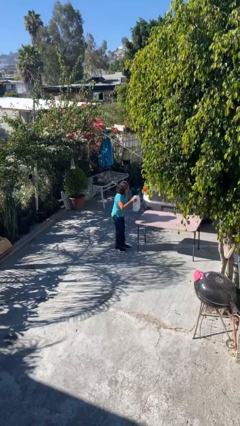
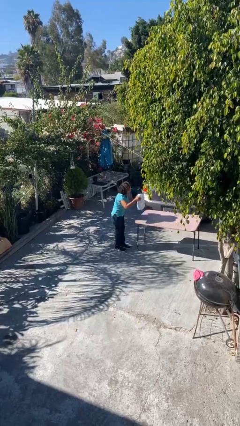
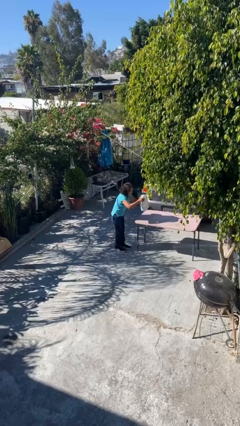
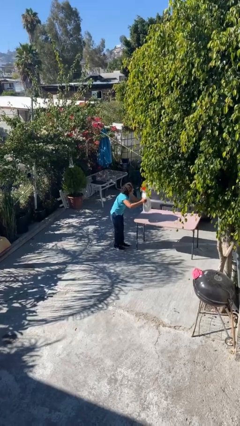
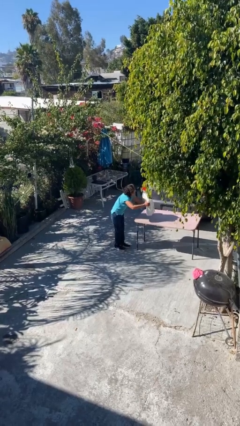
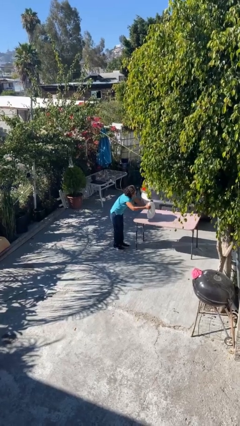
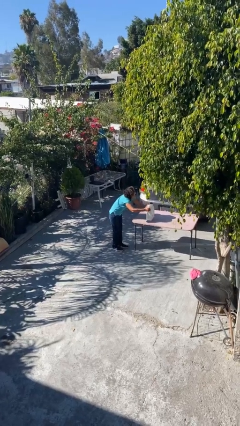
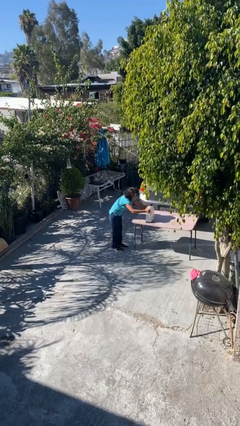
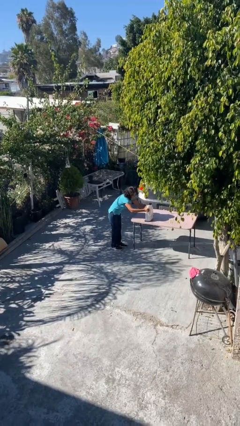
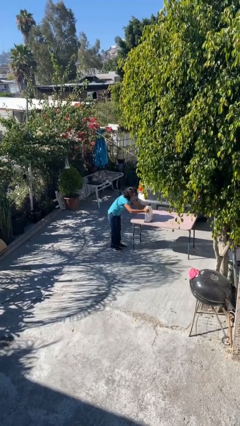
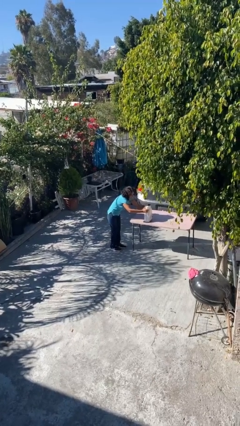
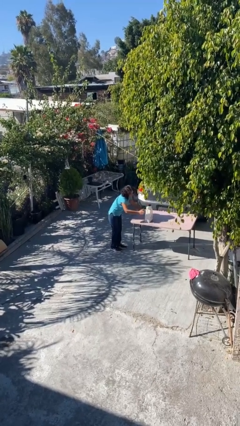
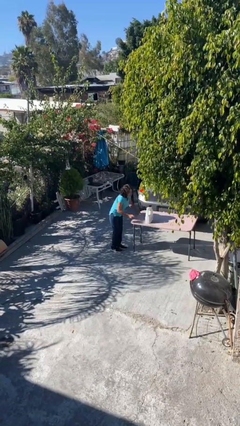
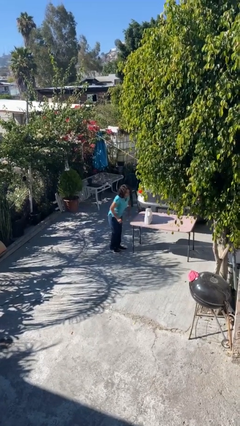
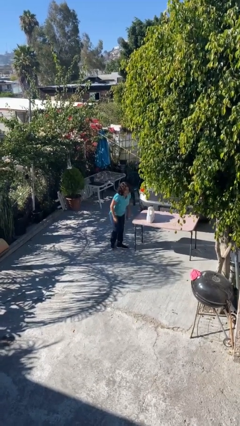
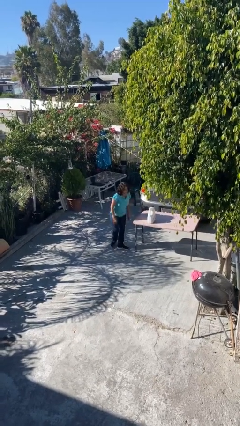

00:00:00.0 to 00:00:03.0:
person puts down object on table

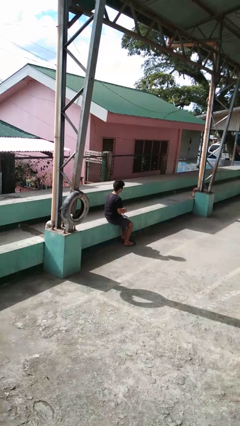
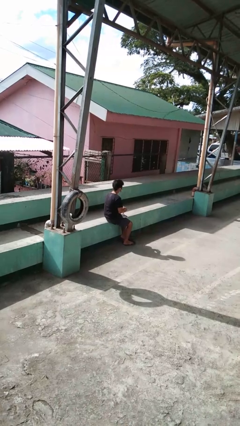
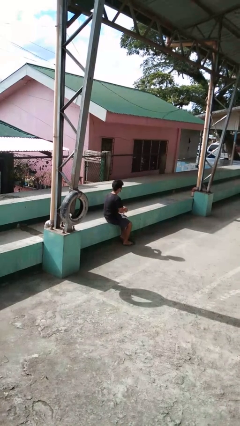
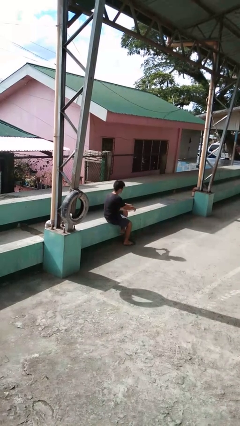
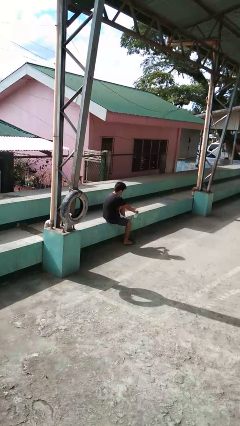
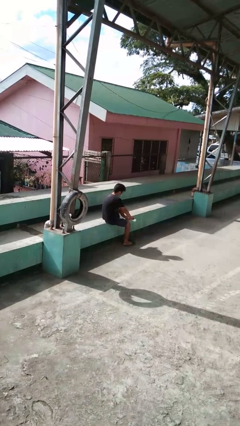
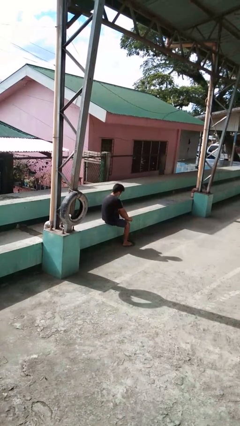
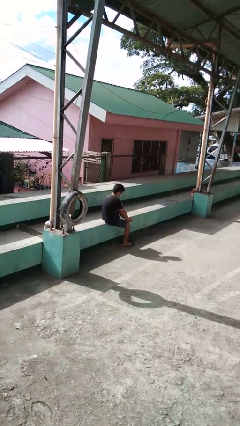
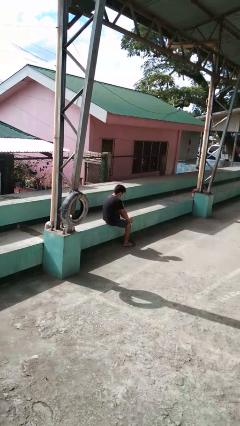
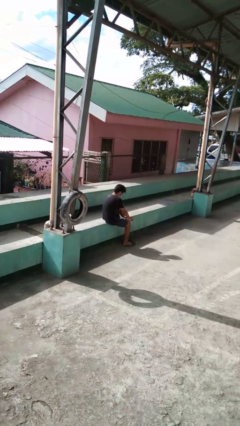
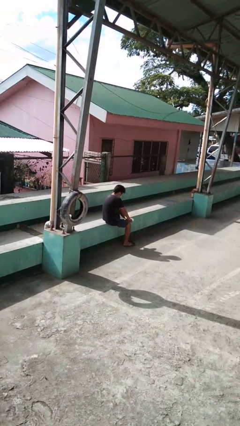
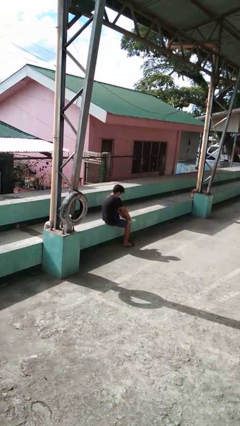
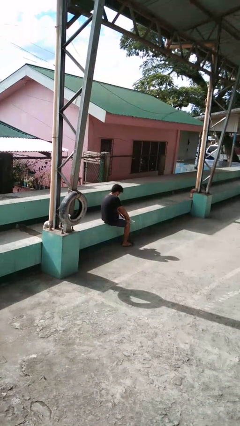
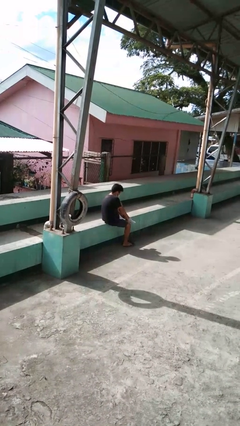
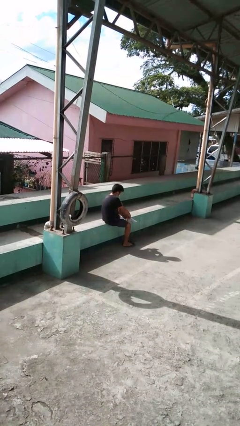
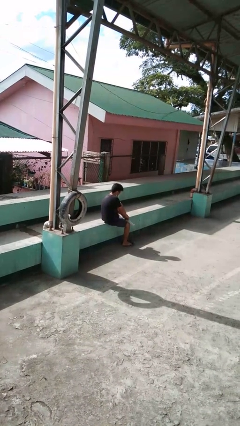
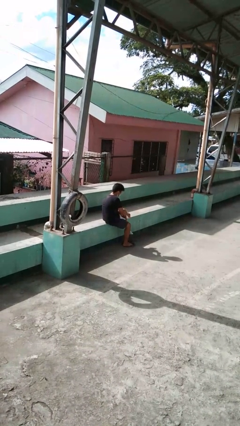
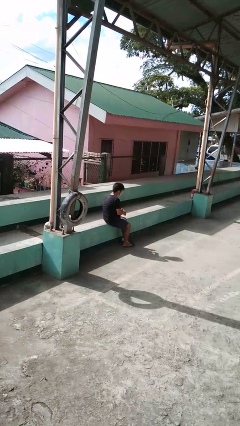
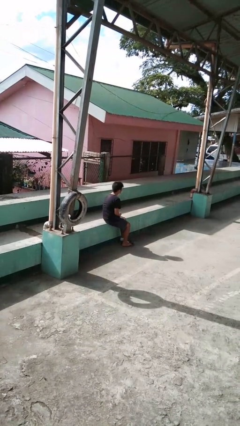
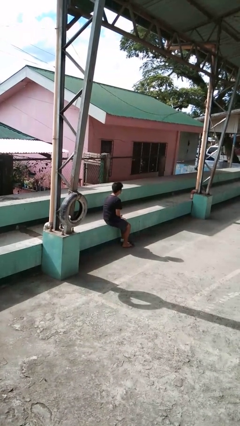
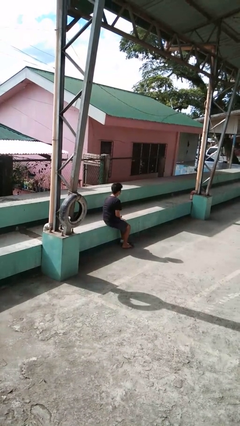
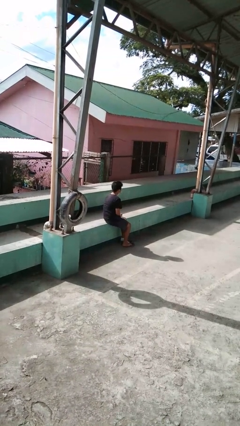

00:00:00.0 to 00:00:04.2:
person puts on socks

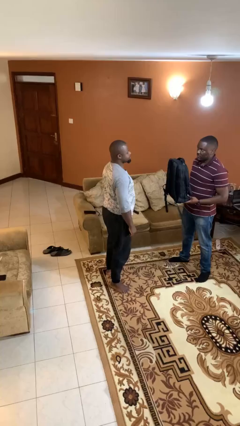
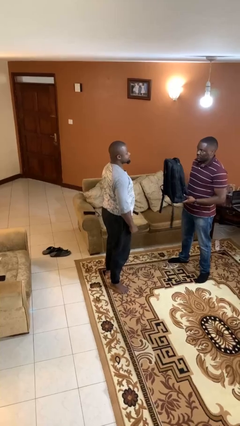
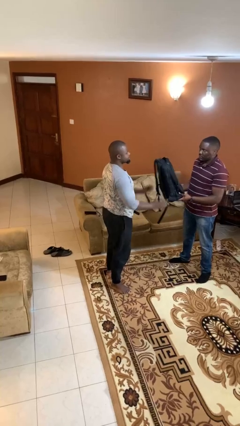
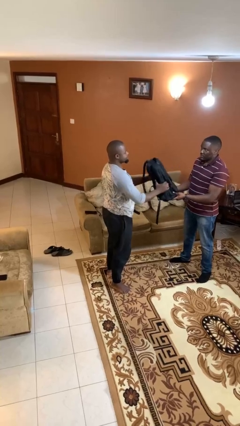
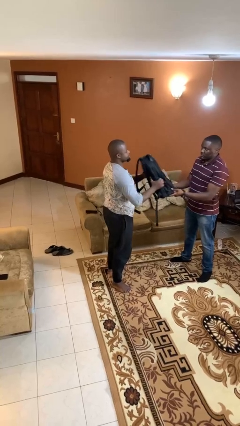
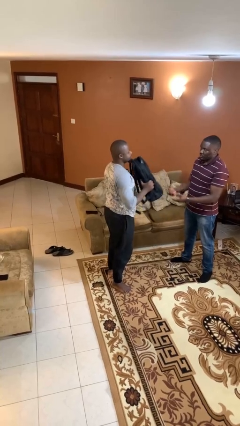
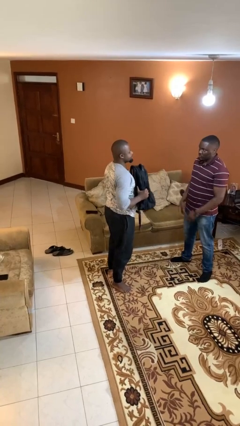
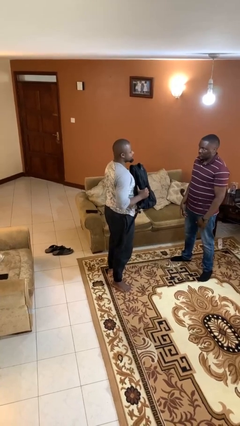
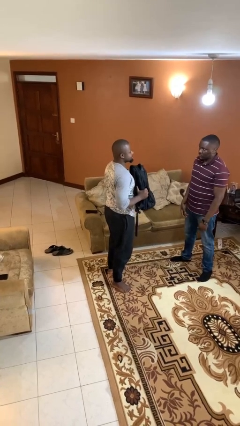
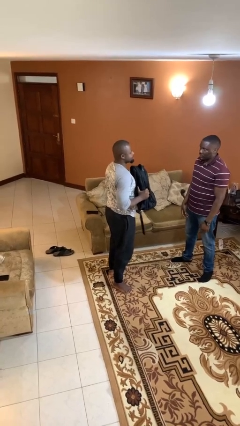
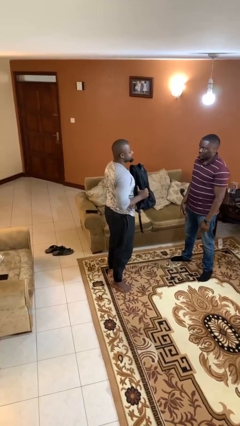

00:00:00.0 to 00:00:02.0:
person transfers object to person

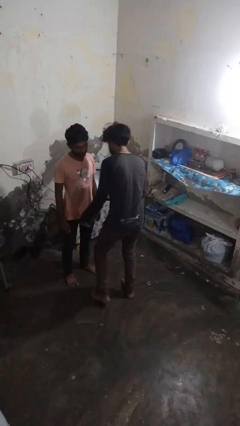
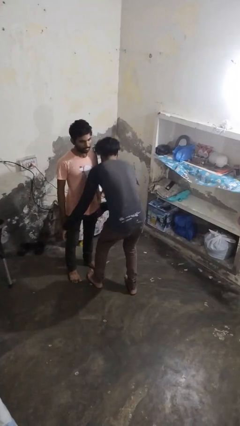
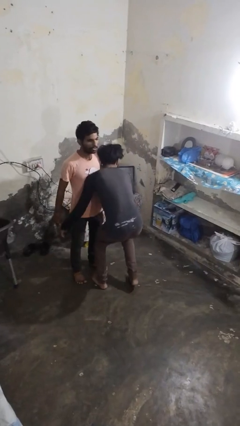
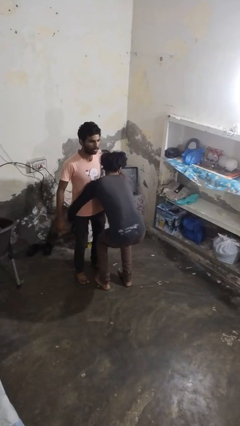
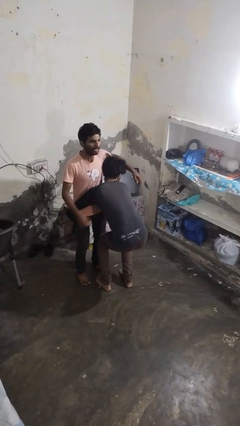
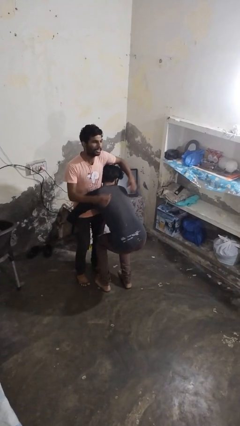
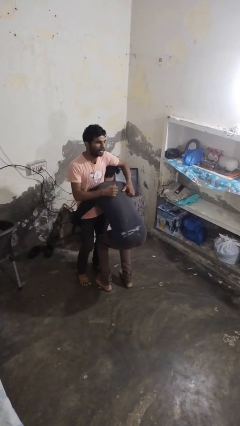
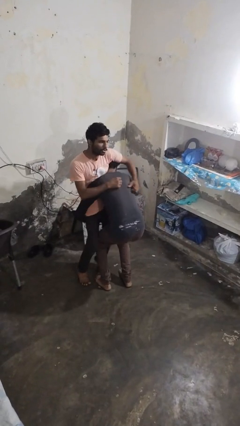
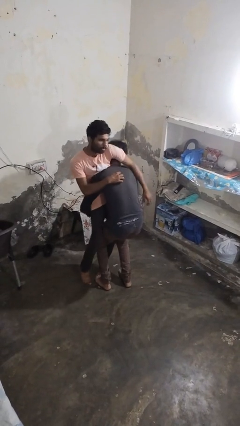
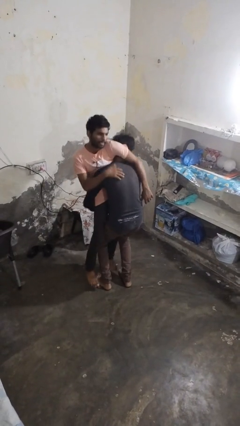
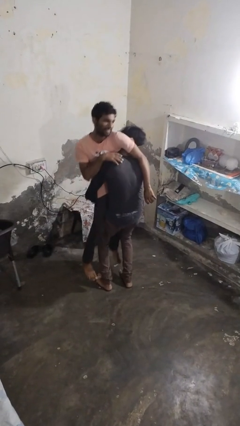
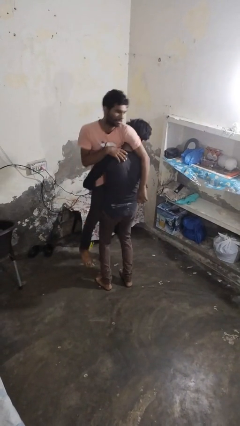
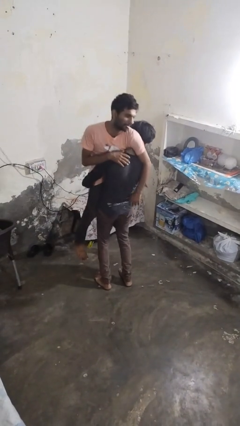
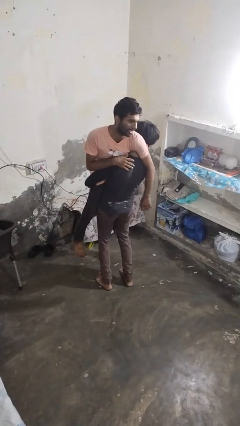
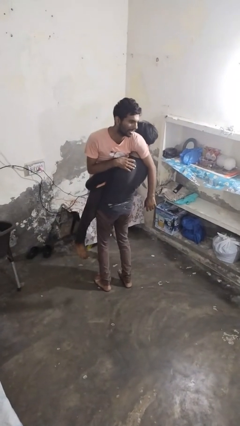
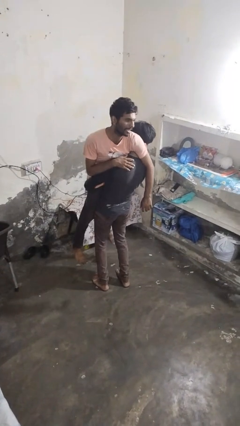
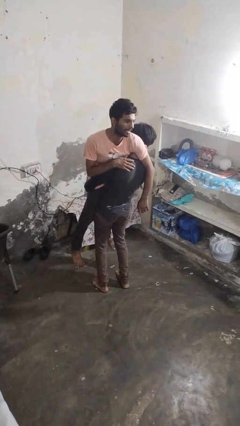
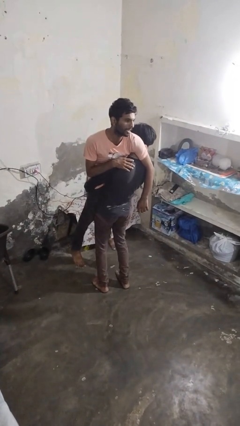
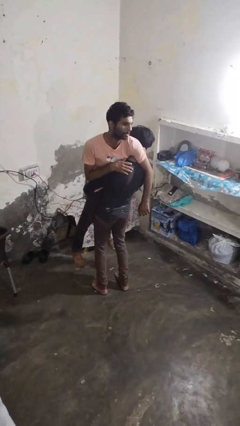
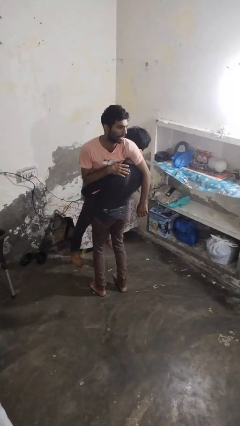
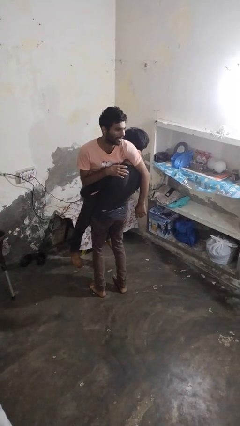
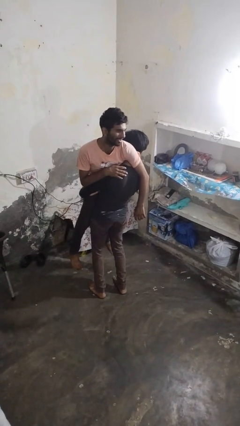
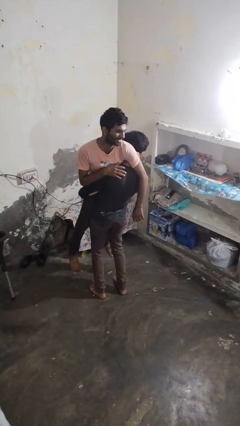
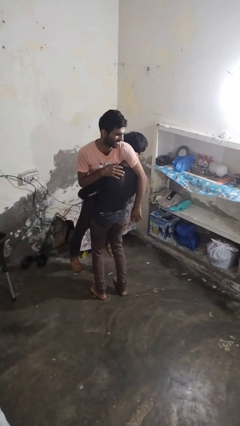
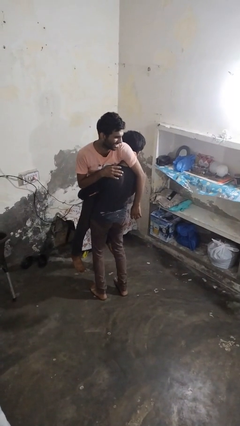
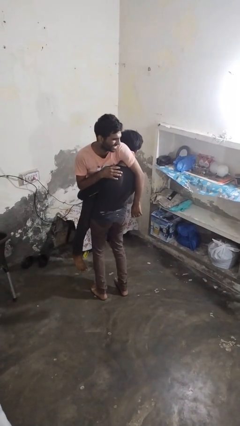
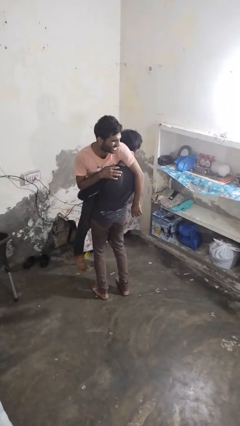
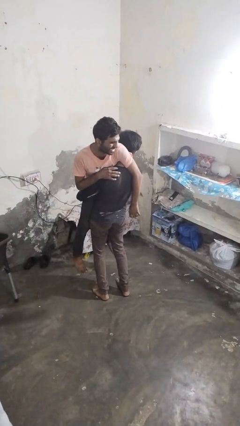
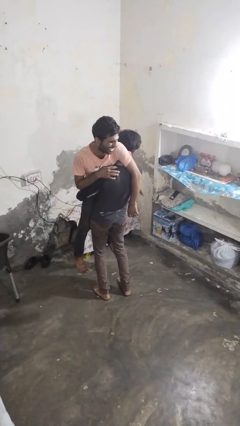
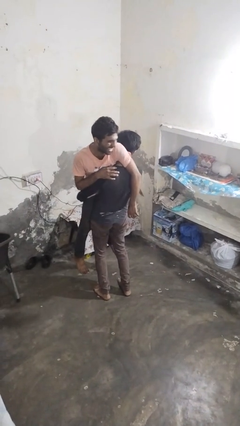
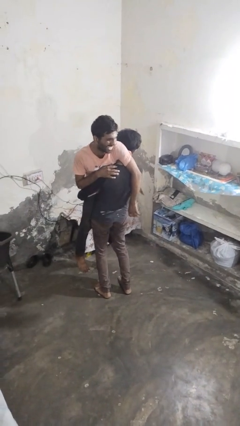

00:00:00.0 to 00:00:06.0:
person picks up person

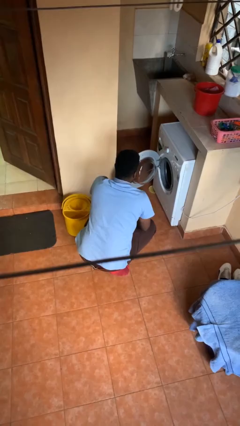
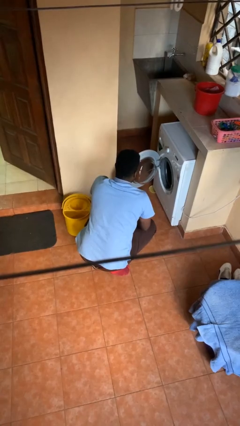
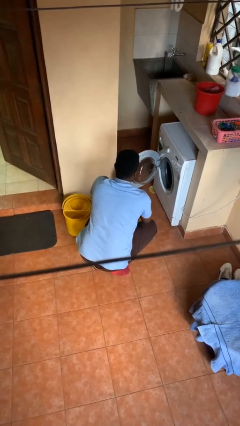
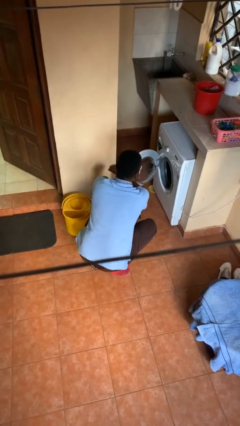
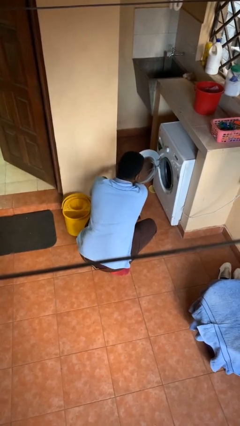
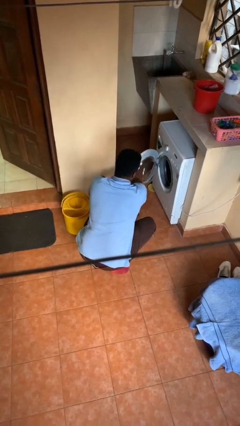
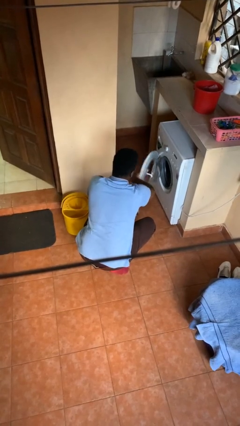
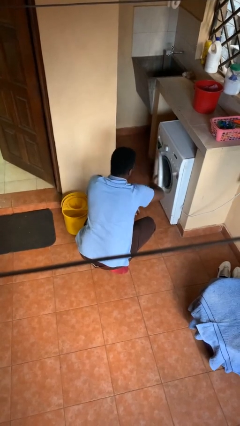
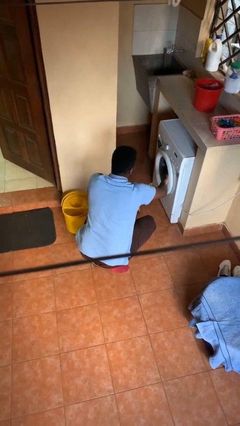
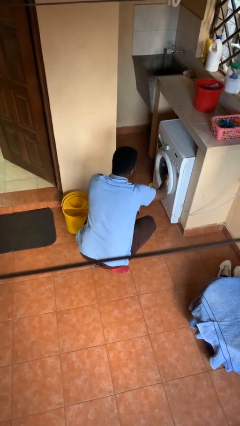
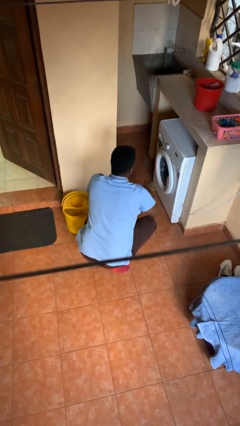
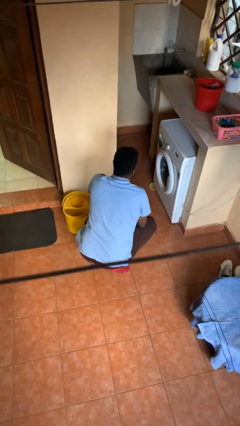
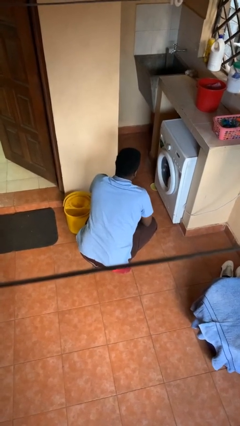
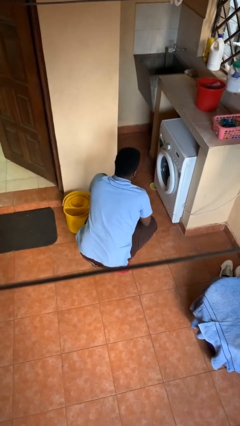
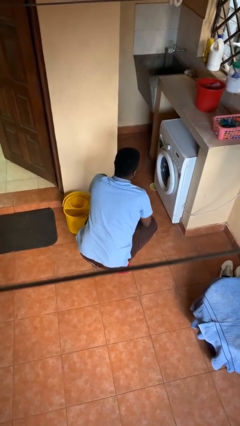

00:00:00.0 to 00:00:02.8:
person closes clothes washer
